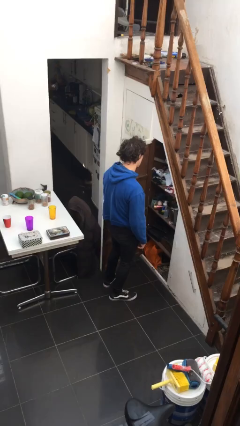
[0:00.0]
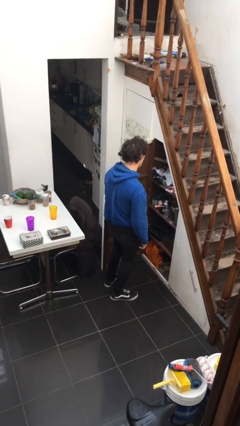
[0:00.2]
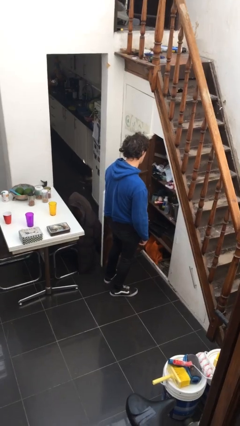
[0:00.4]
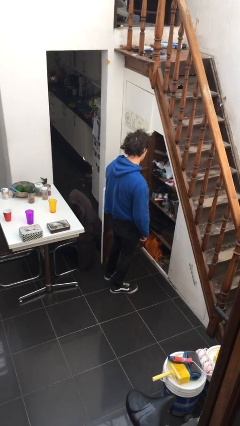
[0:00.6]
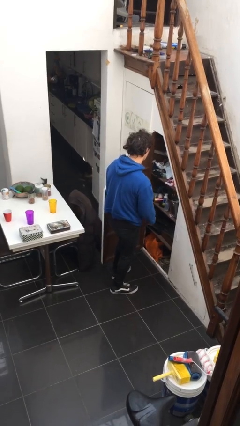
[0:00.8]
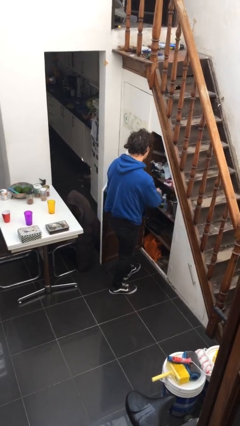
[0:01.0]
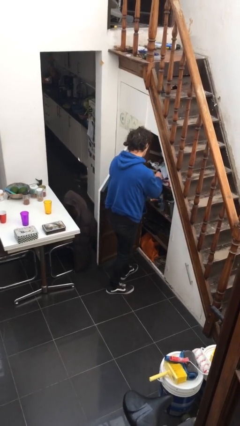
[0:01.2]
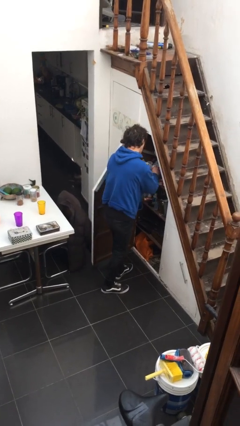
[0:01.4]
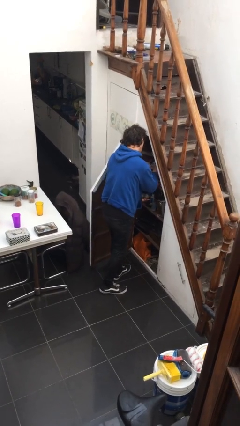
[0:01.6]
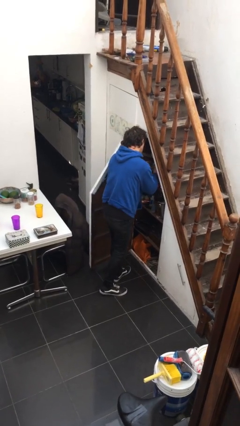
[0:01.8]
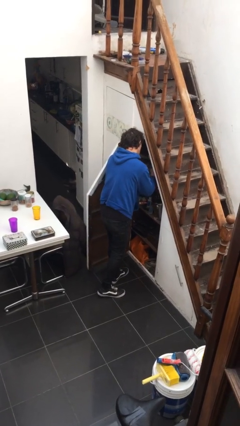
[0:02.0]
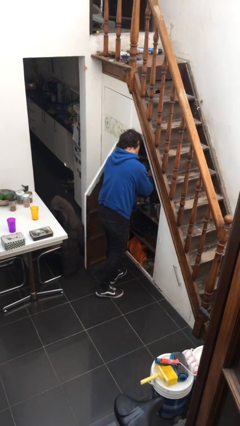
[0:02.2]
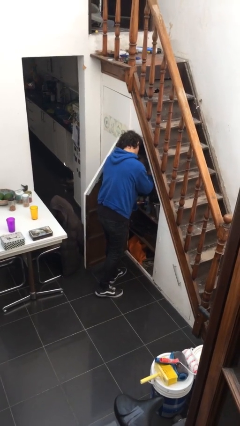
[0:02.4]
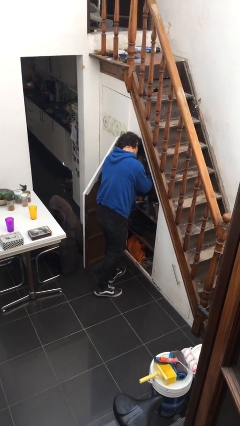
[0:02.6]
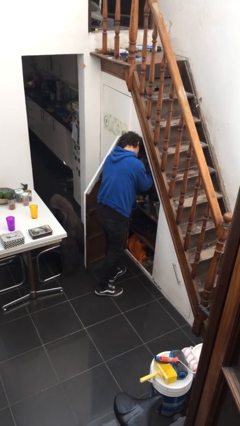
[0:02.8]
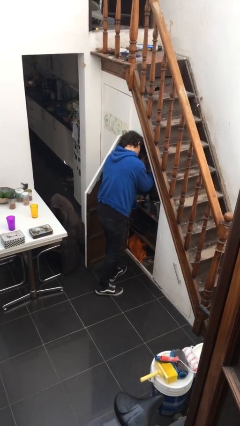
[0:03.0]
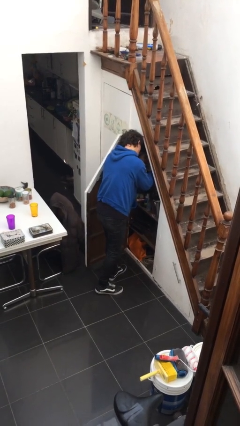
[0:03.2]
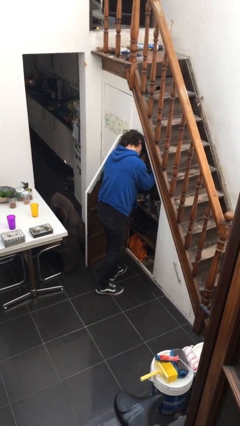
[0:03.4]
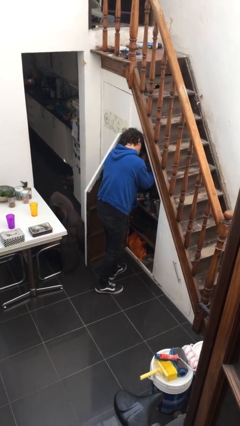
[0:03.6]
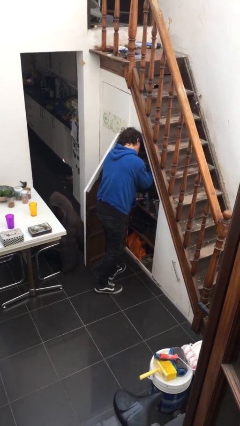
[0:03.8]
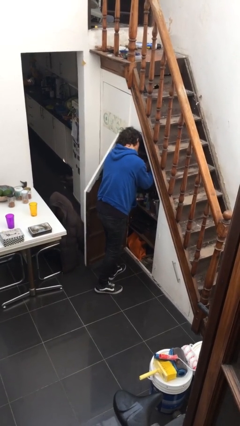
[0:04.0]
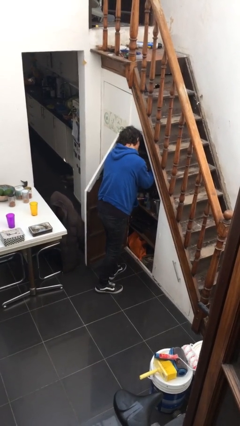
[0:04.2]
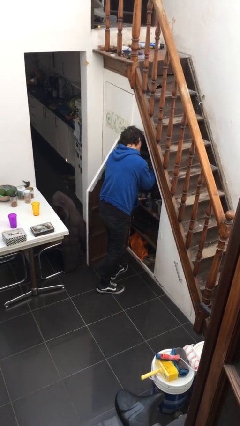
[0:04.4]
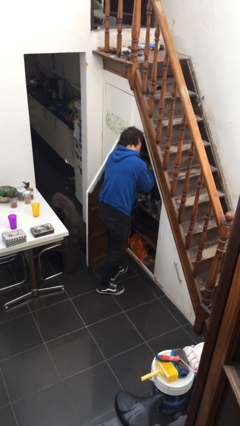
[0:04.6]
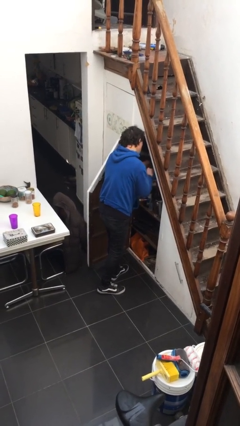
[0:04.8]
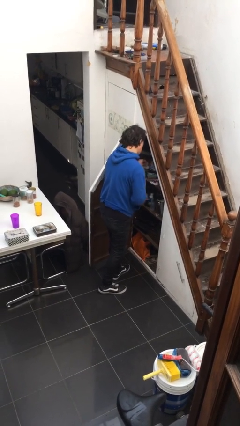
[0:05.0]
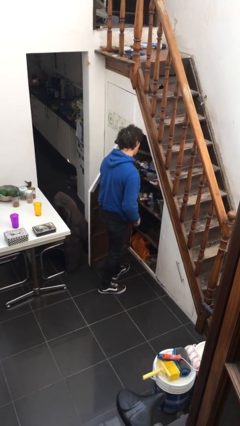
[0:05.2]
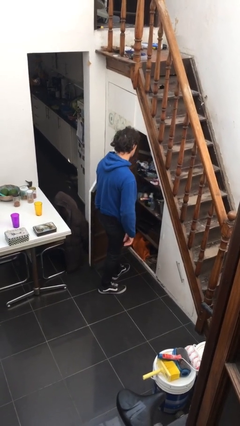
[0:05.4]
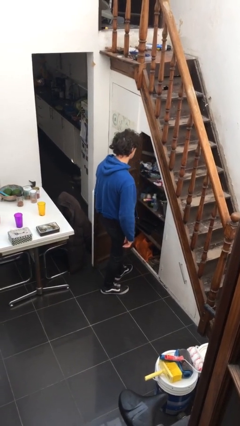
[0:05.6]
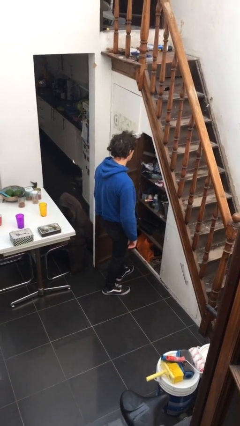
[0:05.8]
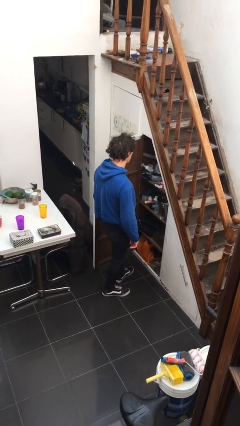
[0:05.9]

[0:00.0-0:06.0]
person searches in cabinet

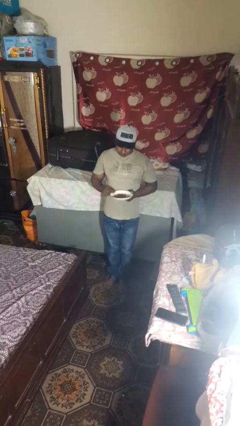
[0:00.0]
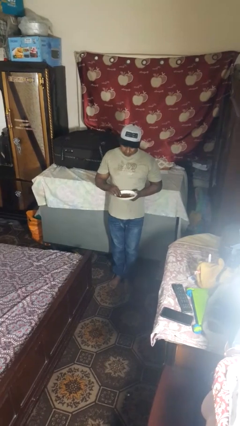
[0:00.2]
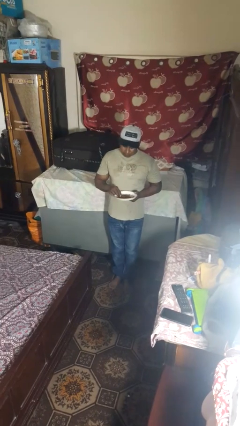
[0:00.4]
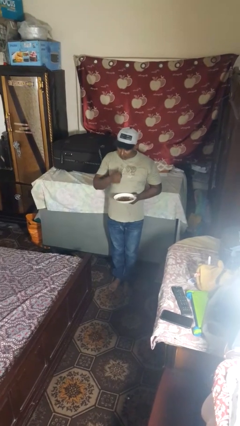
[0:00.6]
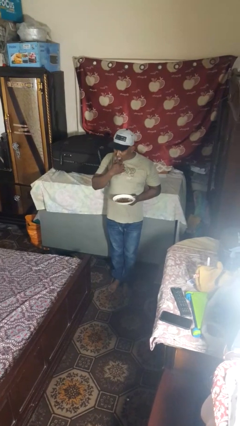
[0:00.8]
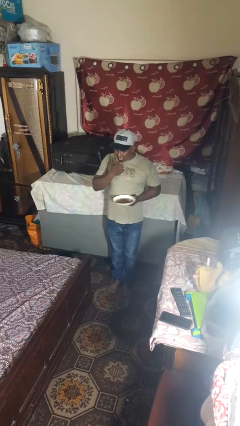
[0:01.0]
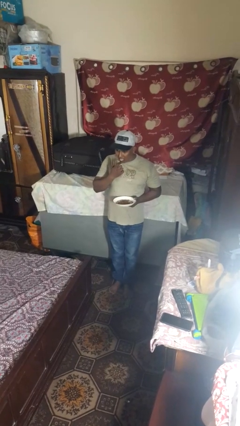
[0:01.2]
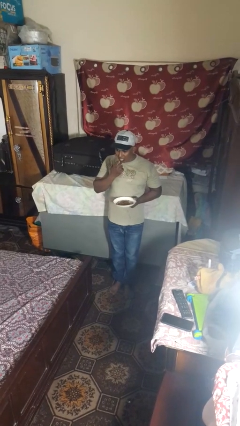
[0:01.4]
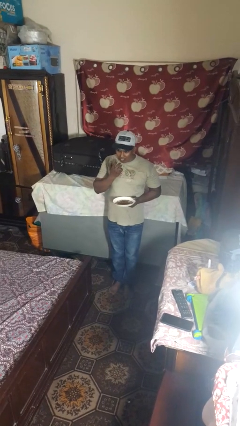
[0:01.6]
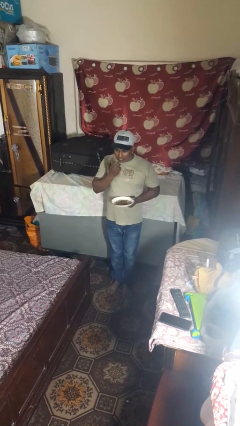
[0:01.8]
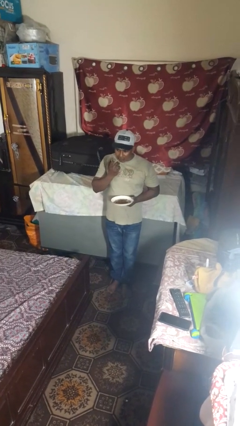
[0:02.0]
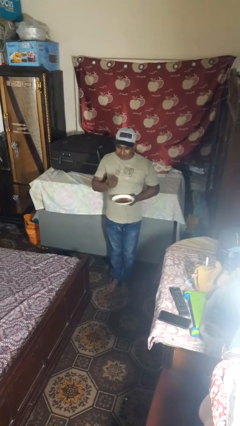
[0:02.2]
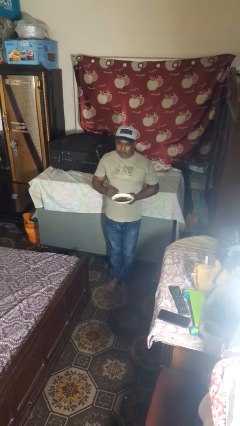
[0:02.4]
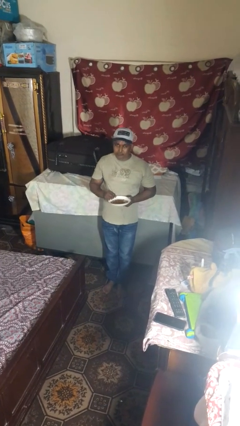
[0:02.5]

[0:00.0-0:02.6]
person licks fingers

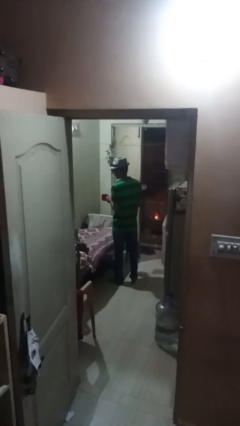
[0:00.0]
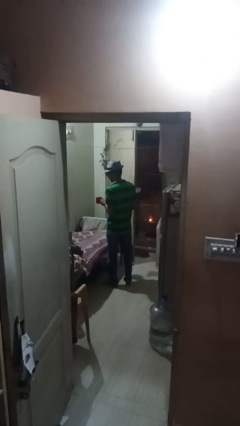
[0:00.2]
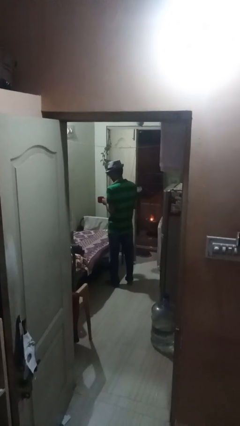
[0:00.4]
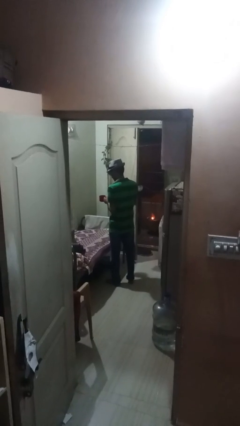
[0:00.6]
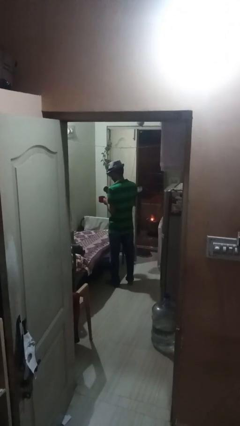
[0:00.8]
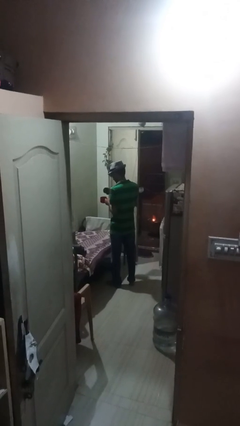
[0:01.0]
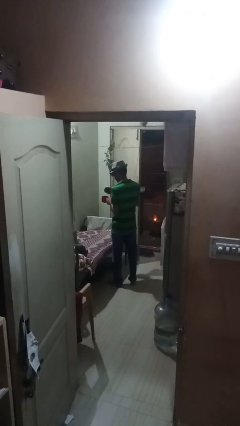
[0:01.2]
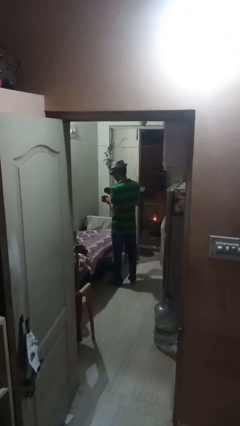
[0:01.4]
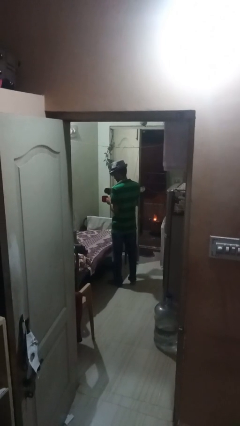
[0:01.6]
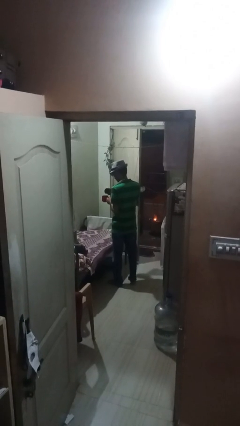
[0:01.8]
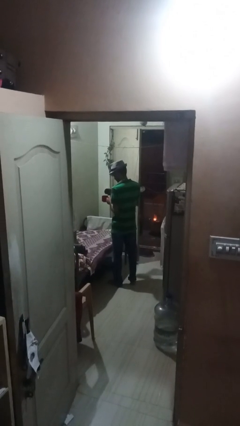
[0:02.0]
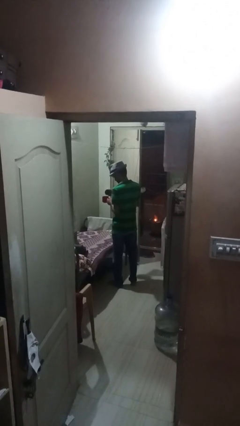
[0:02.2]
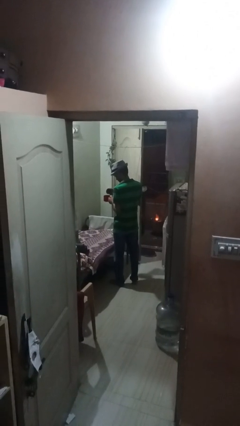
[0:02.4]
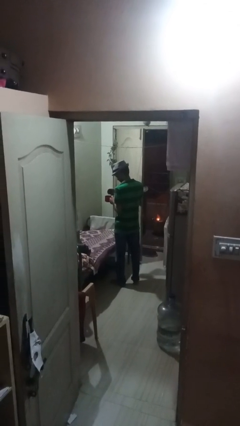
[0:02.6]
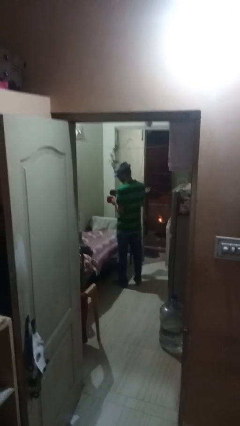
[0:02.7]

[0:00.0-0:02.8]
person pours coffee into mug

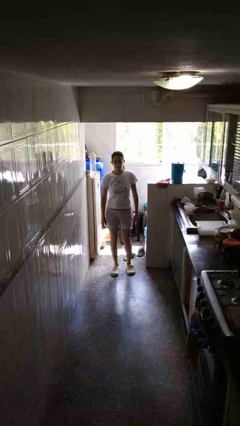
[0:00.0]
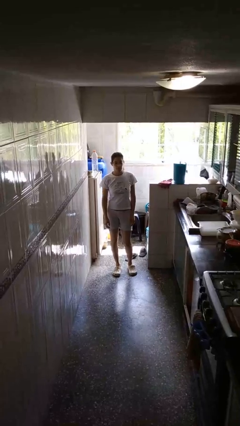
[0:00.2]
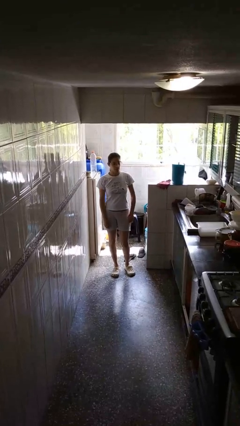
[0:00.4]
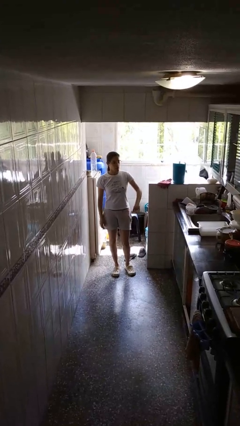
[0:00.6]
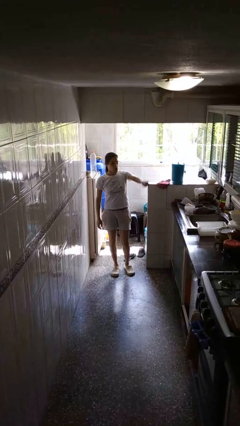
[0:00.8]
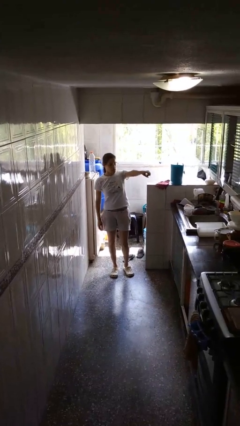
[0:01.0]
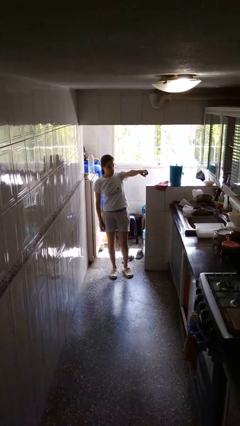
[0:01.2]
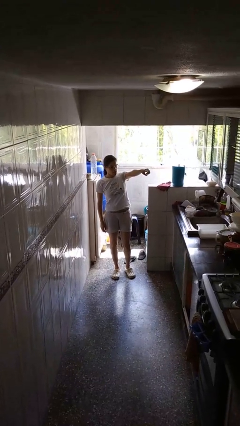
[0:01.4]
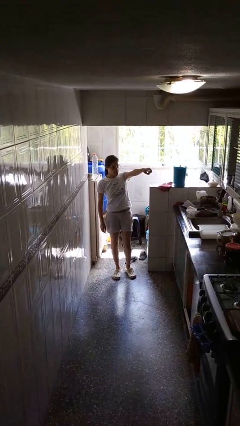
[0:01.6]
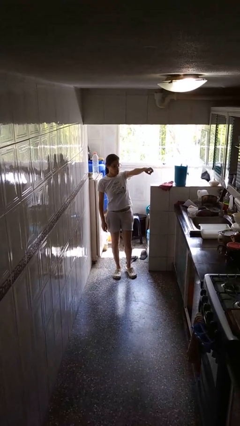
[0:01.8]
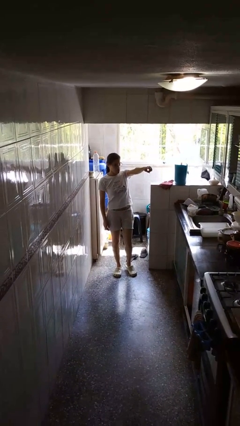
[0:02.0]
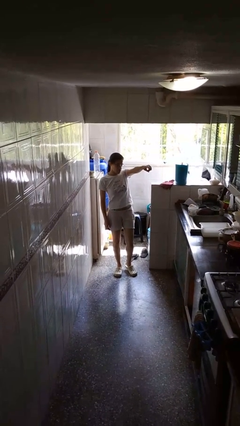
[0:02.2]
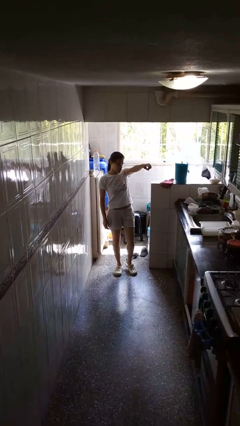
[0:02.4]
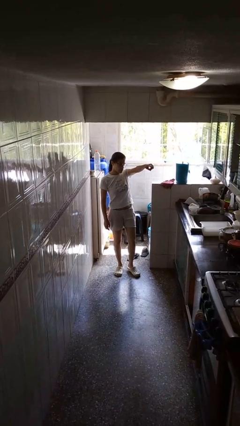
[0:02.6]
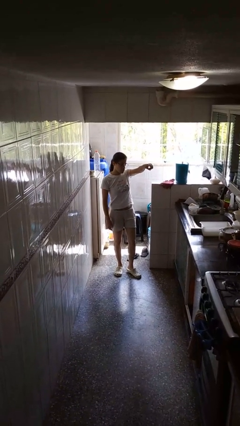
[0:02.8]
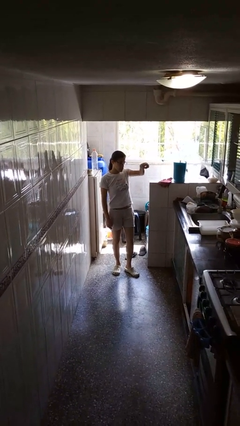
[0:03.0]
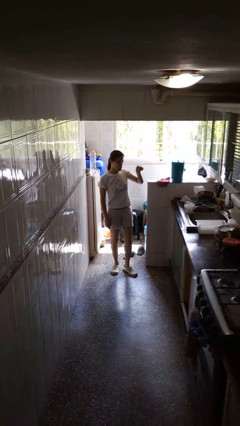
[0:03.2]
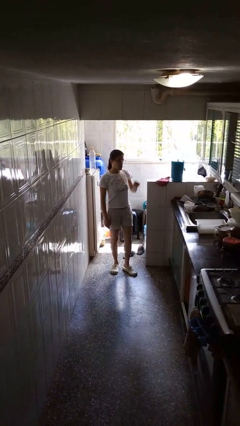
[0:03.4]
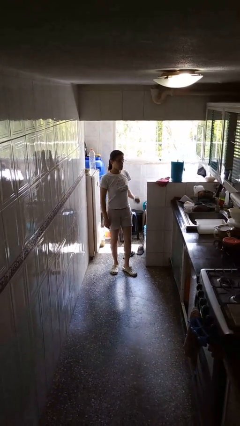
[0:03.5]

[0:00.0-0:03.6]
person points at person

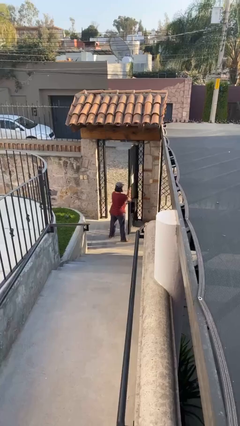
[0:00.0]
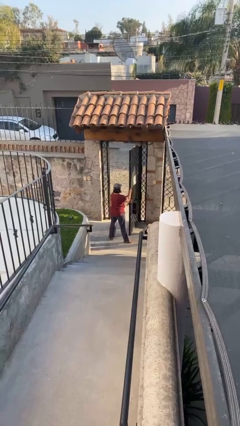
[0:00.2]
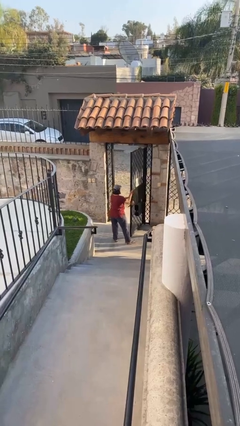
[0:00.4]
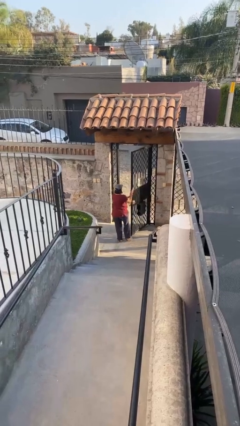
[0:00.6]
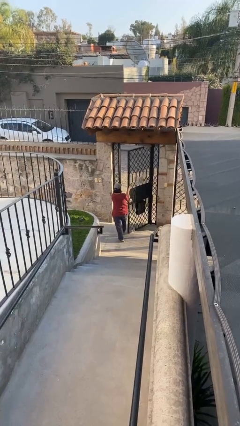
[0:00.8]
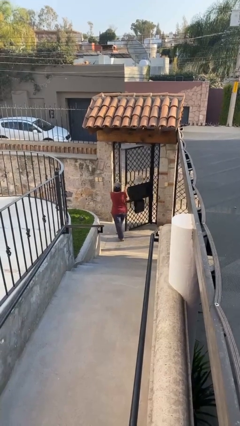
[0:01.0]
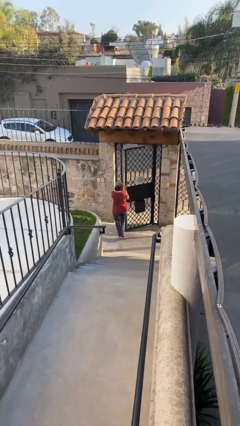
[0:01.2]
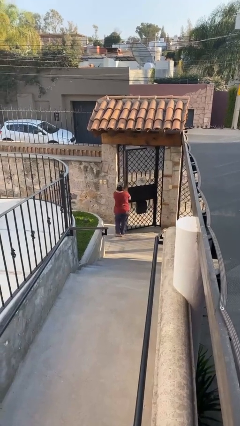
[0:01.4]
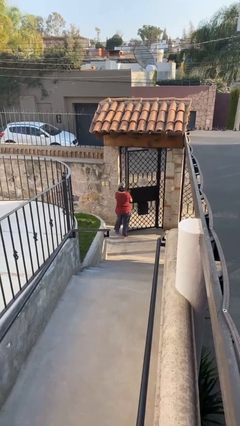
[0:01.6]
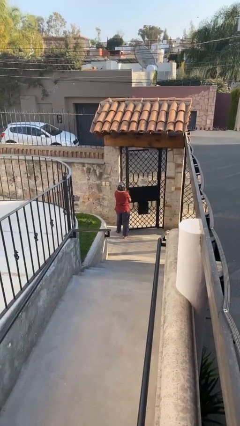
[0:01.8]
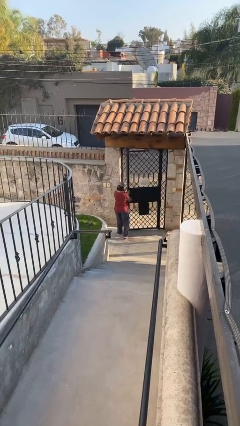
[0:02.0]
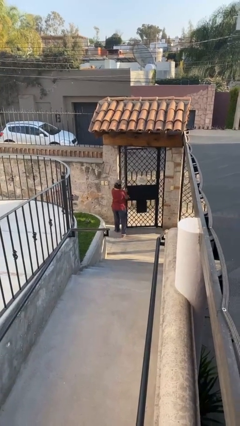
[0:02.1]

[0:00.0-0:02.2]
person closes facility door

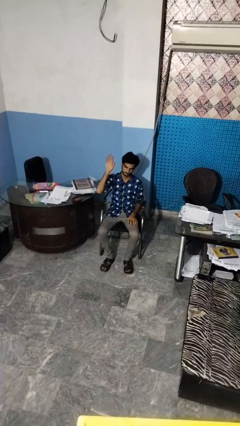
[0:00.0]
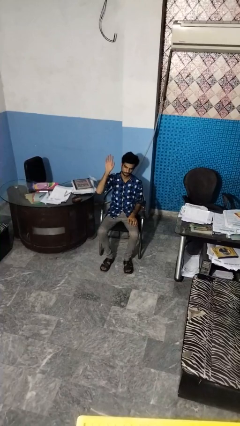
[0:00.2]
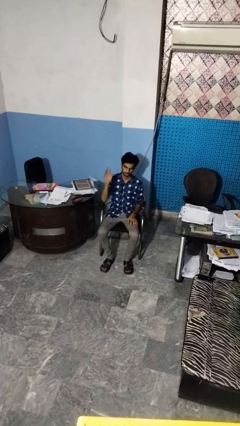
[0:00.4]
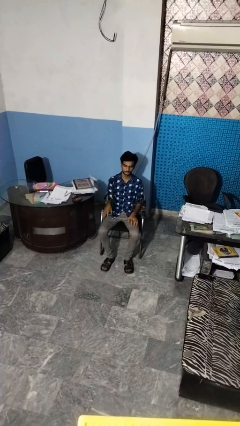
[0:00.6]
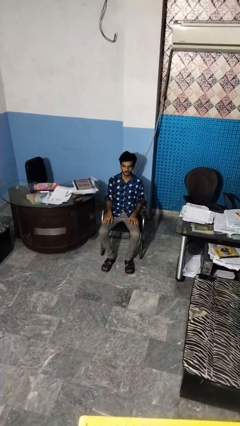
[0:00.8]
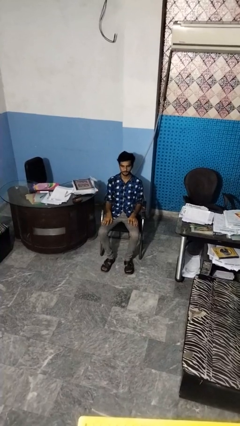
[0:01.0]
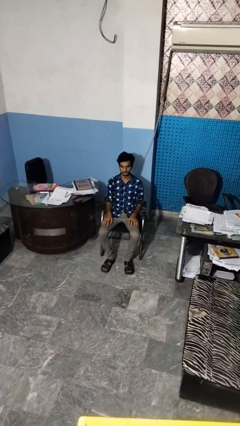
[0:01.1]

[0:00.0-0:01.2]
person gestures lower hand
